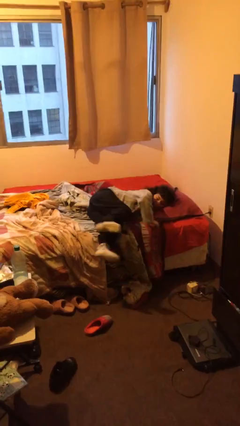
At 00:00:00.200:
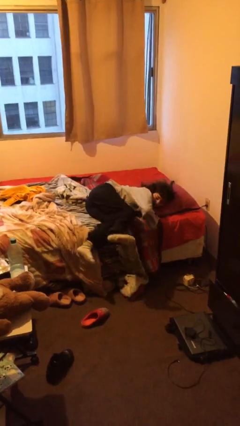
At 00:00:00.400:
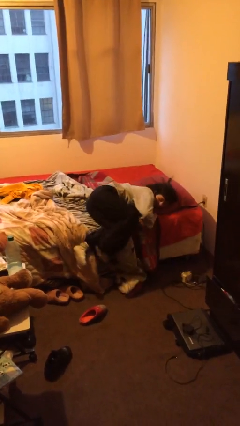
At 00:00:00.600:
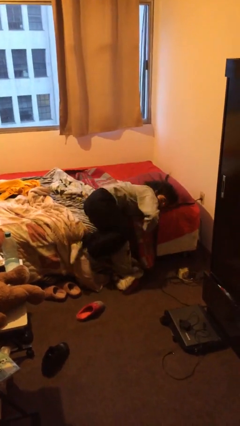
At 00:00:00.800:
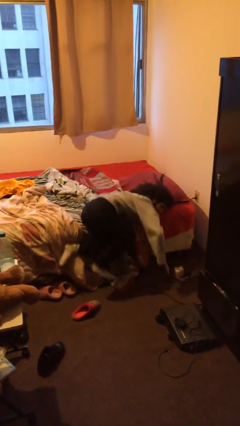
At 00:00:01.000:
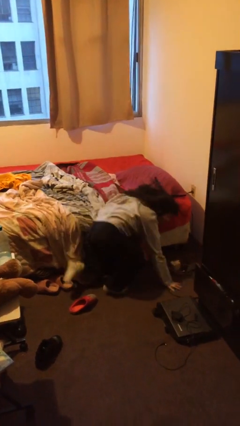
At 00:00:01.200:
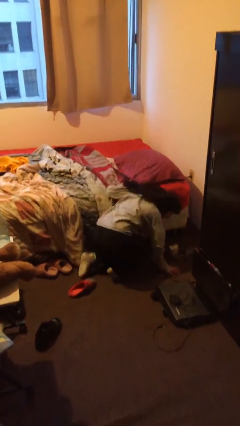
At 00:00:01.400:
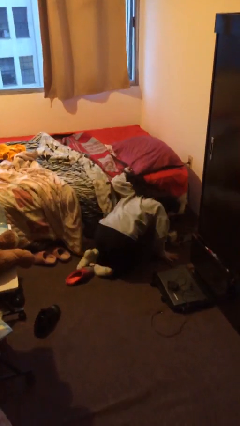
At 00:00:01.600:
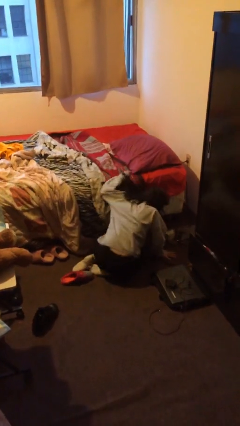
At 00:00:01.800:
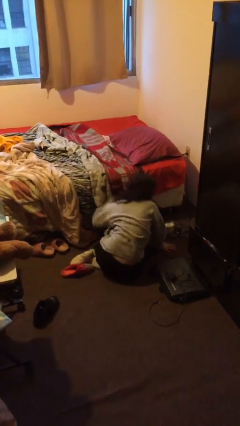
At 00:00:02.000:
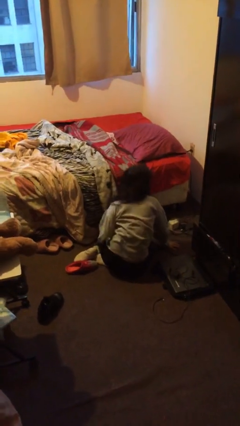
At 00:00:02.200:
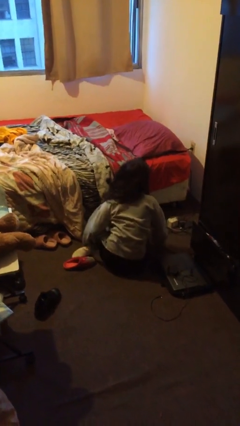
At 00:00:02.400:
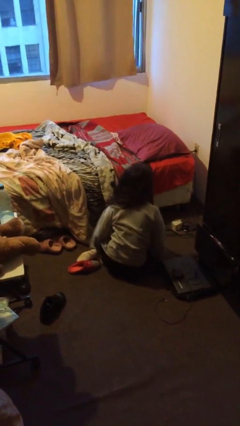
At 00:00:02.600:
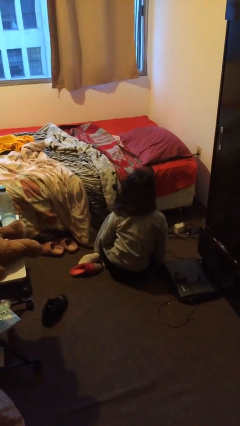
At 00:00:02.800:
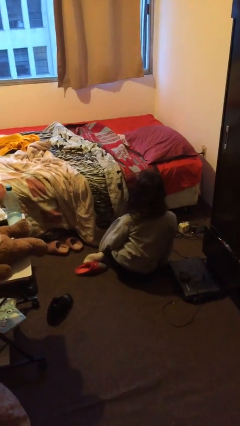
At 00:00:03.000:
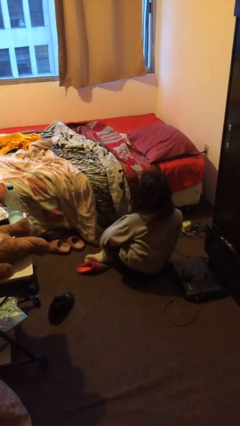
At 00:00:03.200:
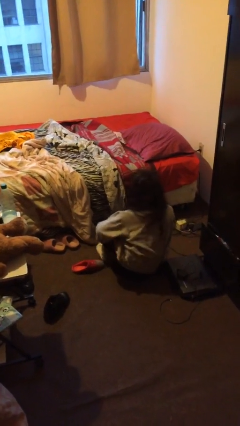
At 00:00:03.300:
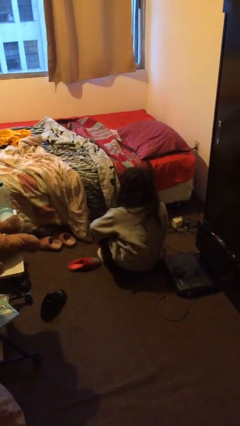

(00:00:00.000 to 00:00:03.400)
person falls from bed

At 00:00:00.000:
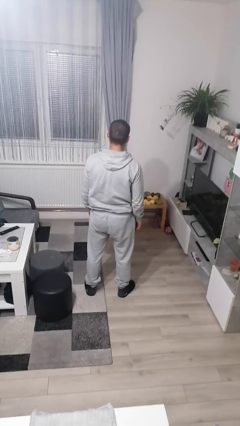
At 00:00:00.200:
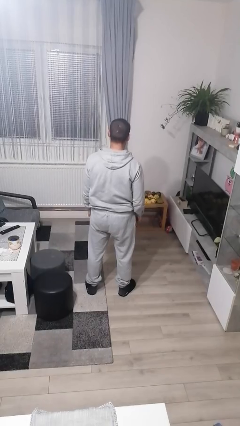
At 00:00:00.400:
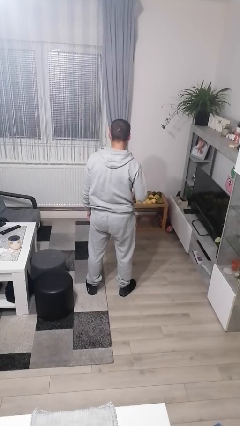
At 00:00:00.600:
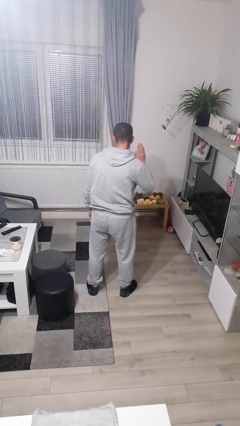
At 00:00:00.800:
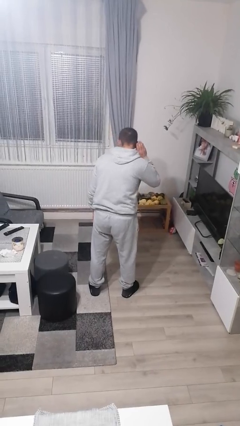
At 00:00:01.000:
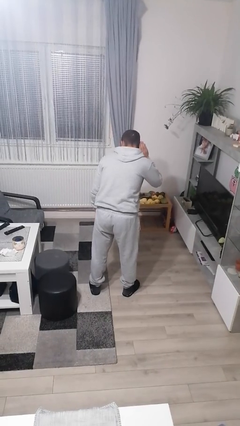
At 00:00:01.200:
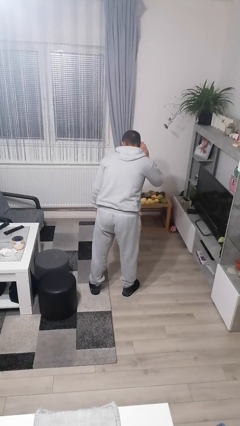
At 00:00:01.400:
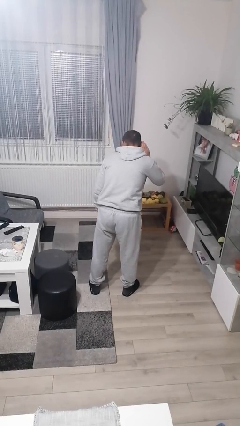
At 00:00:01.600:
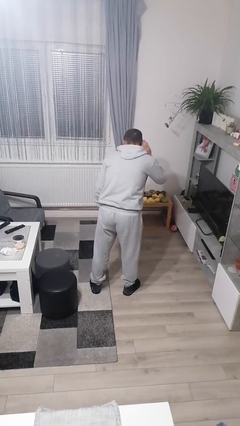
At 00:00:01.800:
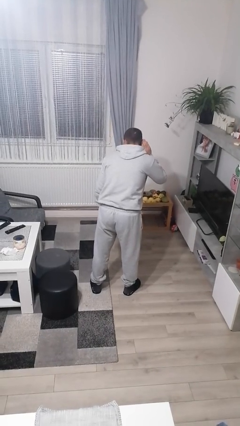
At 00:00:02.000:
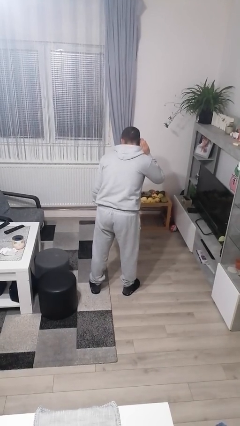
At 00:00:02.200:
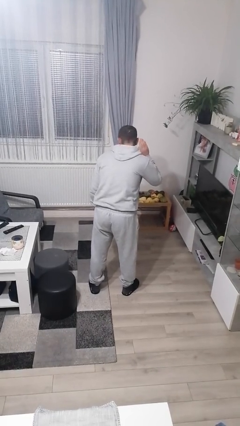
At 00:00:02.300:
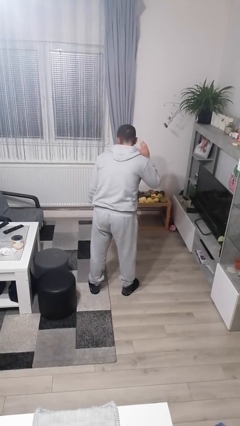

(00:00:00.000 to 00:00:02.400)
person gestures listen closely

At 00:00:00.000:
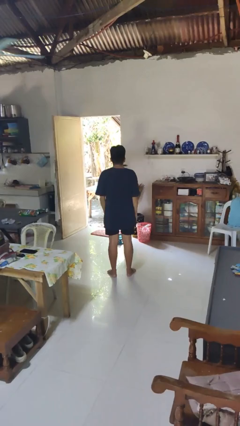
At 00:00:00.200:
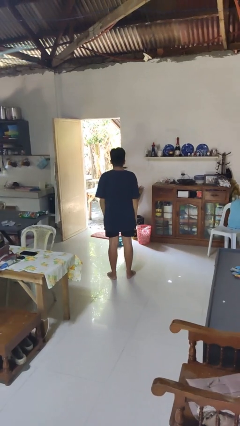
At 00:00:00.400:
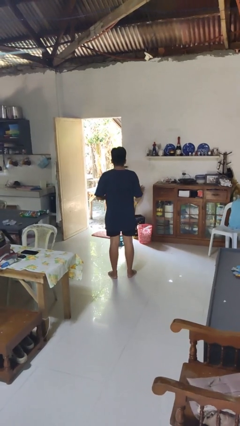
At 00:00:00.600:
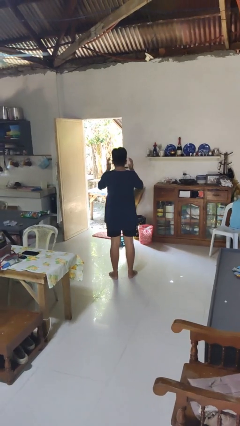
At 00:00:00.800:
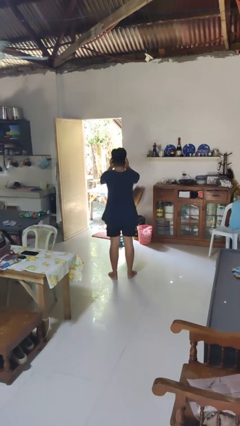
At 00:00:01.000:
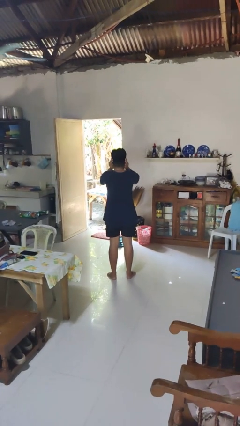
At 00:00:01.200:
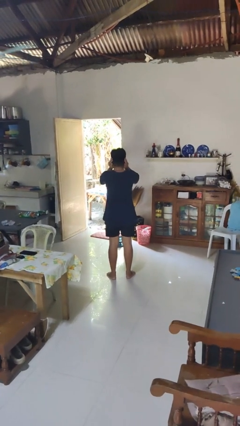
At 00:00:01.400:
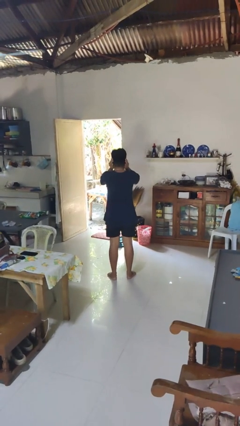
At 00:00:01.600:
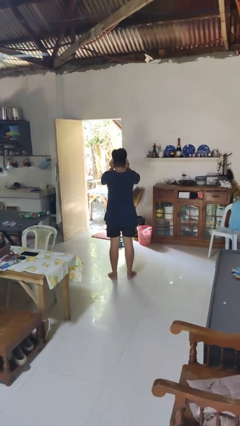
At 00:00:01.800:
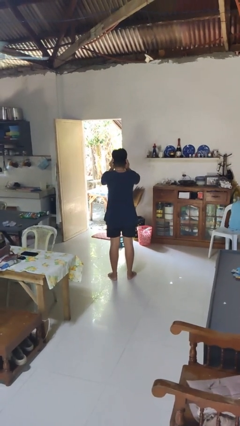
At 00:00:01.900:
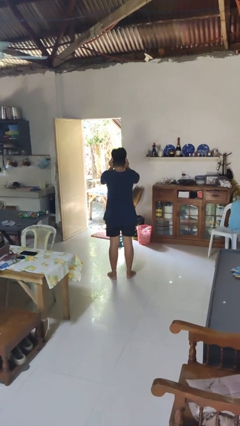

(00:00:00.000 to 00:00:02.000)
person puts fingers in ear

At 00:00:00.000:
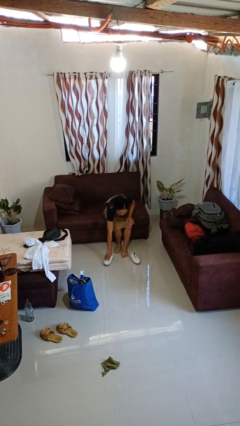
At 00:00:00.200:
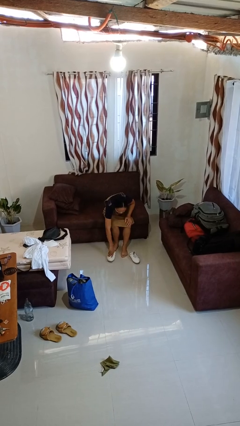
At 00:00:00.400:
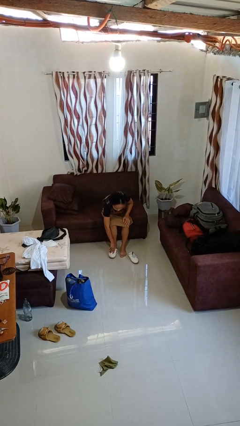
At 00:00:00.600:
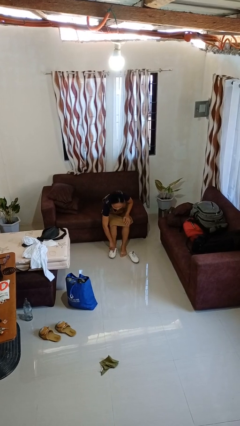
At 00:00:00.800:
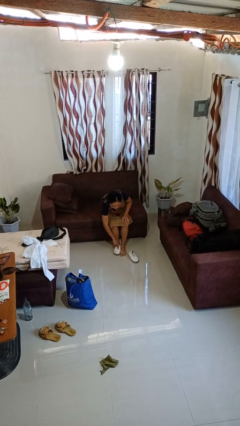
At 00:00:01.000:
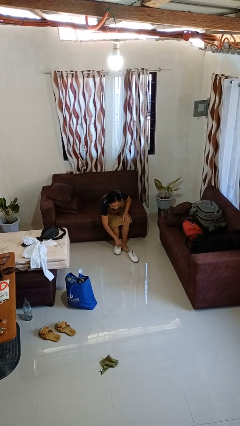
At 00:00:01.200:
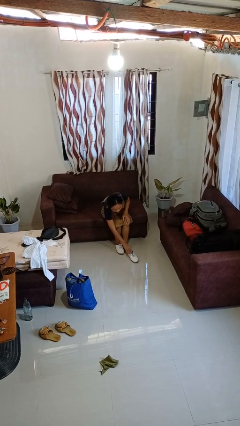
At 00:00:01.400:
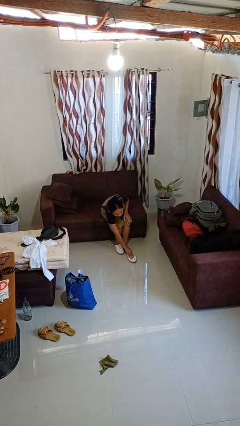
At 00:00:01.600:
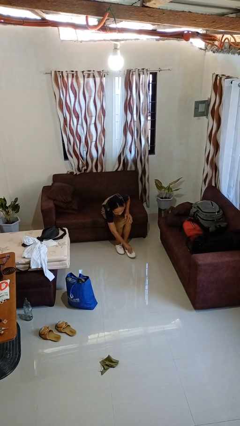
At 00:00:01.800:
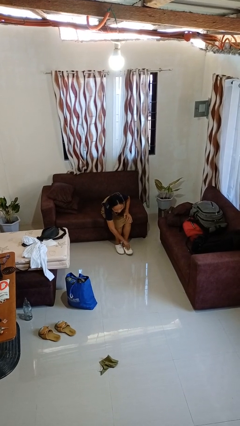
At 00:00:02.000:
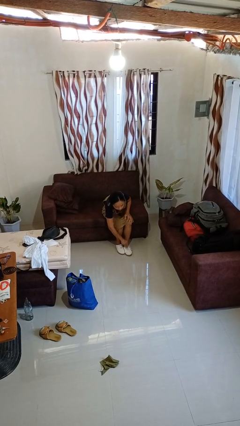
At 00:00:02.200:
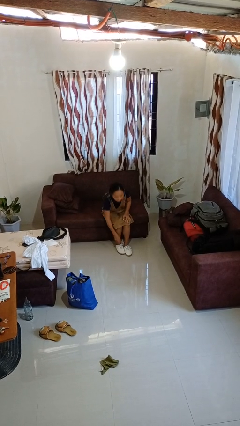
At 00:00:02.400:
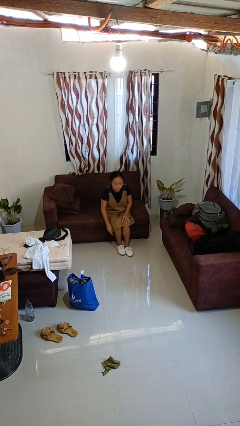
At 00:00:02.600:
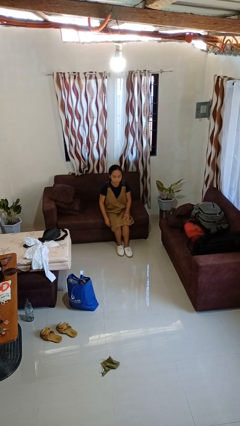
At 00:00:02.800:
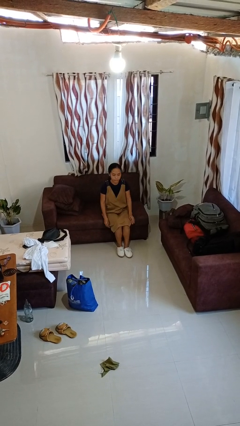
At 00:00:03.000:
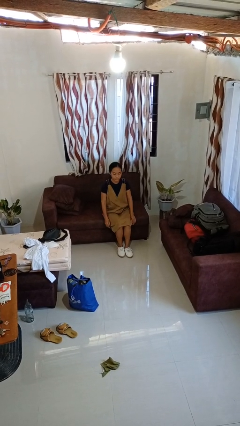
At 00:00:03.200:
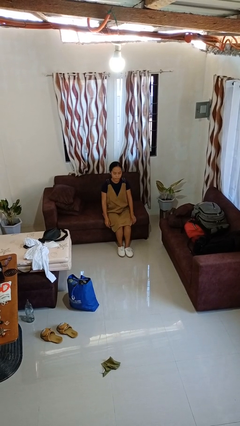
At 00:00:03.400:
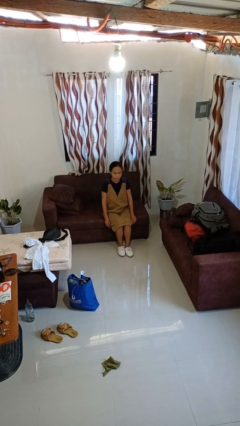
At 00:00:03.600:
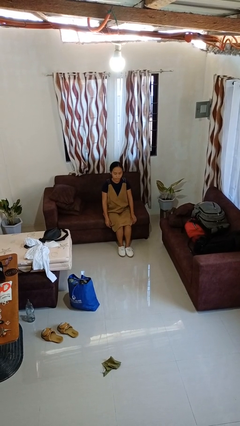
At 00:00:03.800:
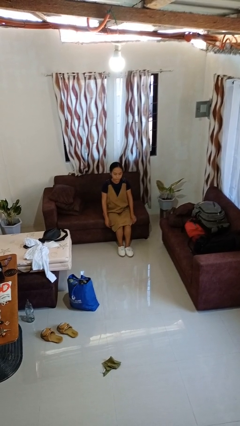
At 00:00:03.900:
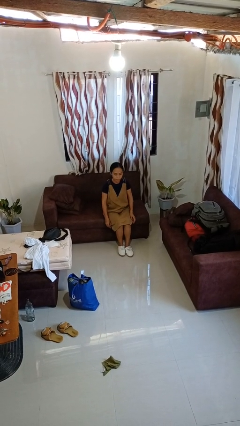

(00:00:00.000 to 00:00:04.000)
person puts on shoes

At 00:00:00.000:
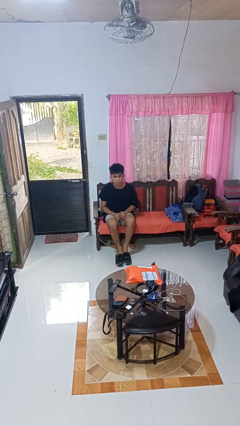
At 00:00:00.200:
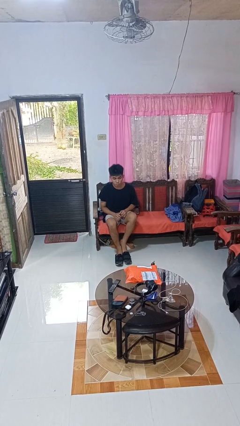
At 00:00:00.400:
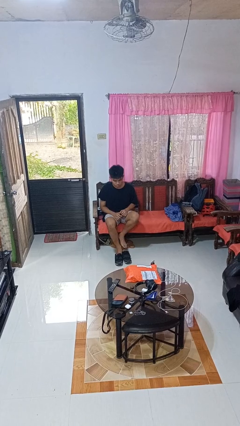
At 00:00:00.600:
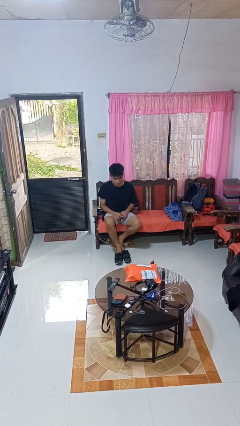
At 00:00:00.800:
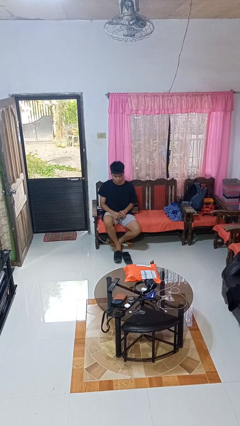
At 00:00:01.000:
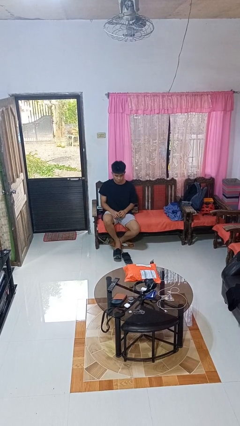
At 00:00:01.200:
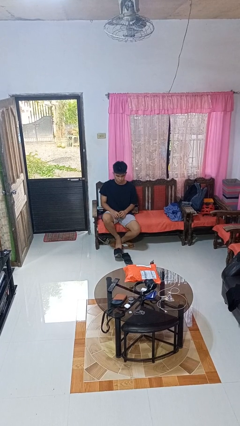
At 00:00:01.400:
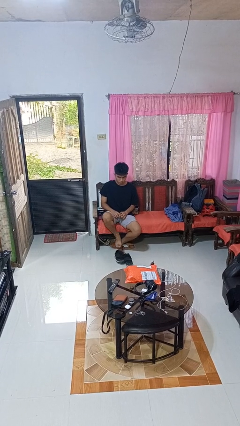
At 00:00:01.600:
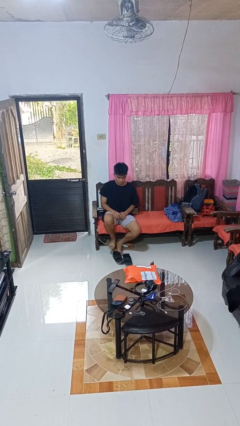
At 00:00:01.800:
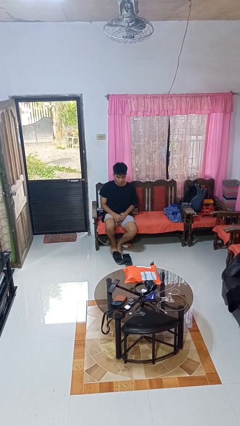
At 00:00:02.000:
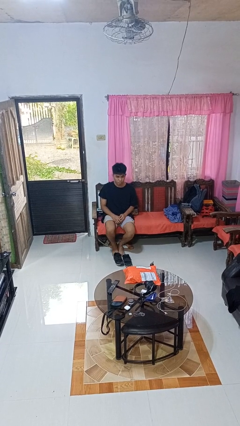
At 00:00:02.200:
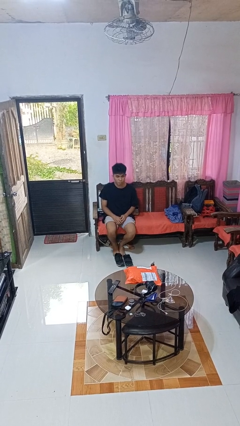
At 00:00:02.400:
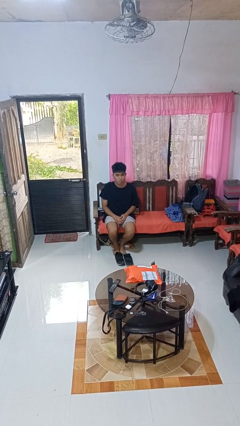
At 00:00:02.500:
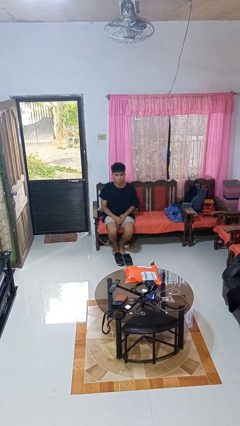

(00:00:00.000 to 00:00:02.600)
person takes off shoes

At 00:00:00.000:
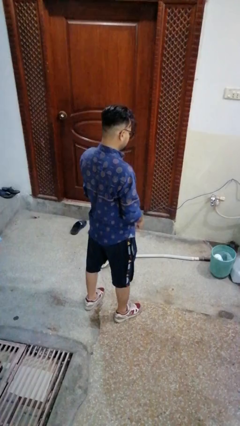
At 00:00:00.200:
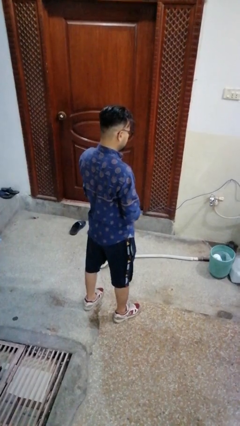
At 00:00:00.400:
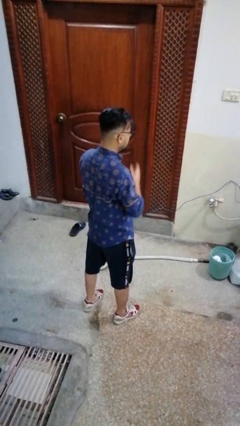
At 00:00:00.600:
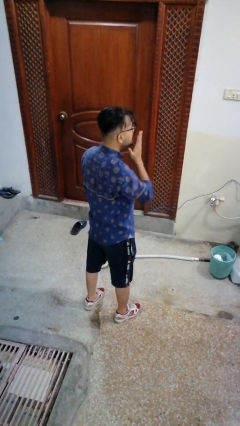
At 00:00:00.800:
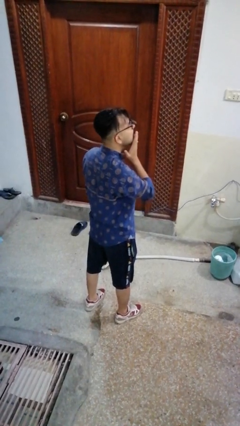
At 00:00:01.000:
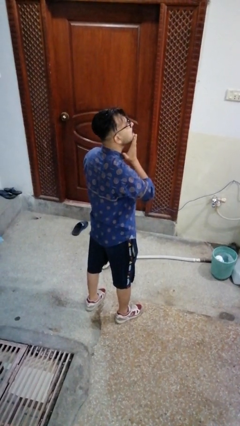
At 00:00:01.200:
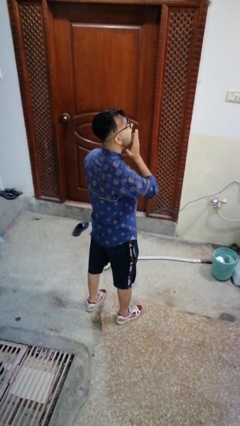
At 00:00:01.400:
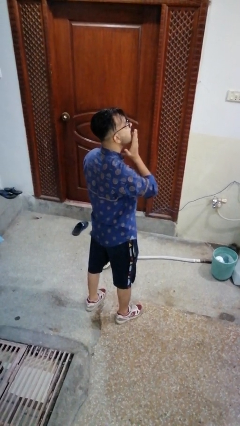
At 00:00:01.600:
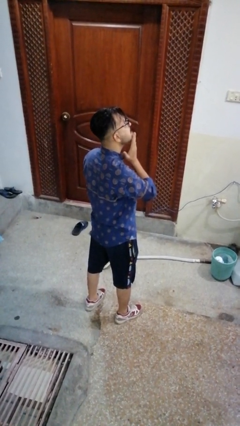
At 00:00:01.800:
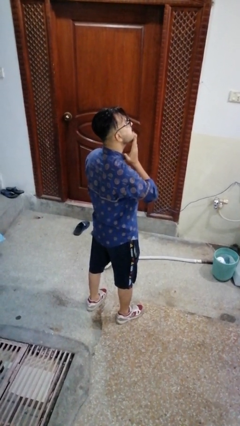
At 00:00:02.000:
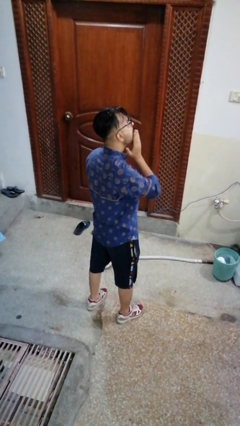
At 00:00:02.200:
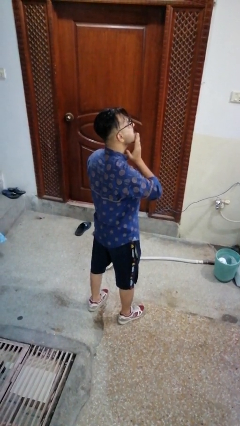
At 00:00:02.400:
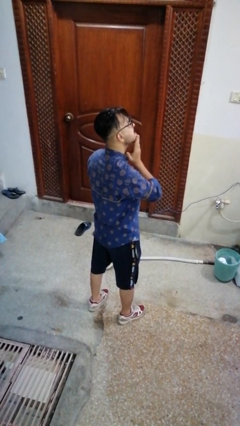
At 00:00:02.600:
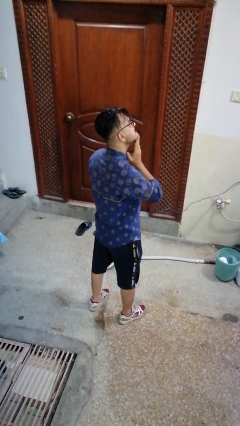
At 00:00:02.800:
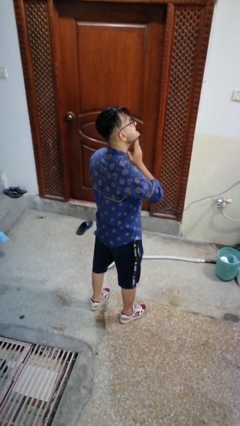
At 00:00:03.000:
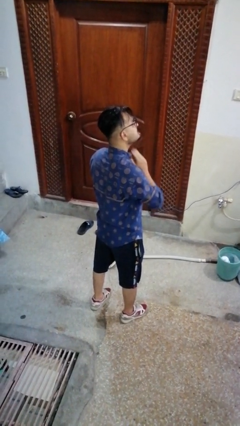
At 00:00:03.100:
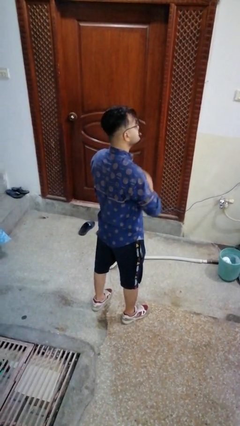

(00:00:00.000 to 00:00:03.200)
person strokes chin
